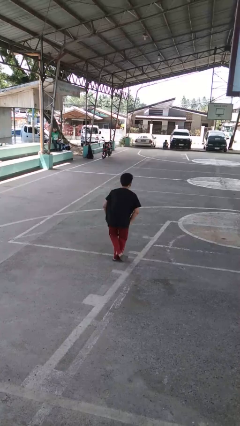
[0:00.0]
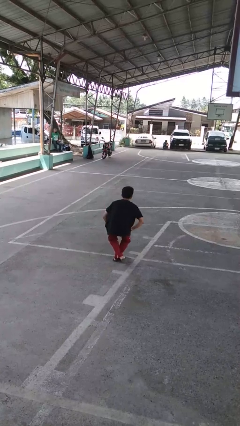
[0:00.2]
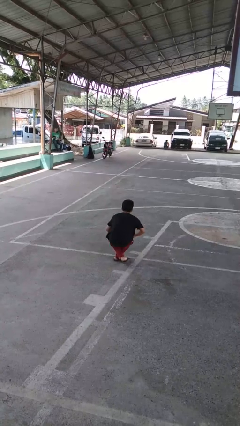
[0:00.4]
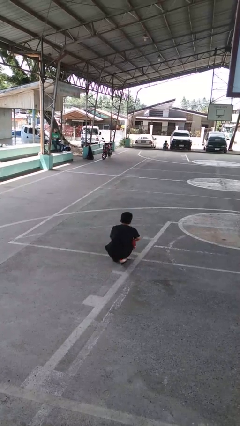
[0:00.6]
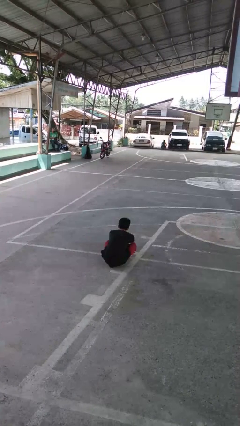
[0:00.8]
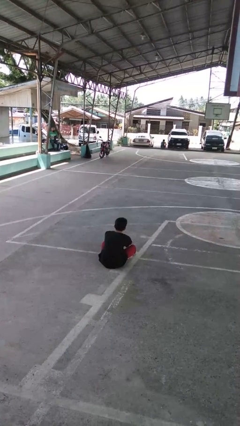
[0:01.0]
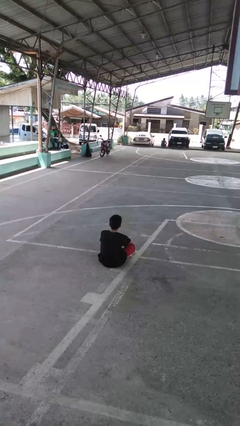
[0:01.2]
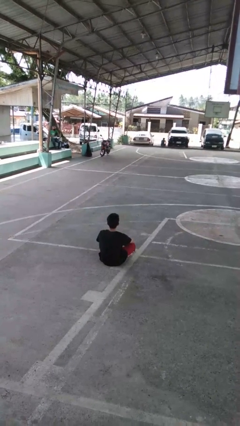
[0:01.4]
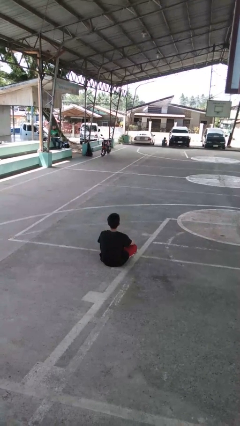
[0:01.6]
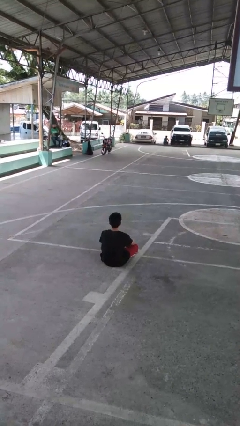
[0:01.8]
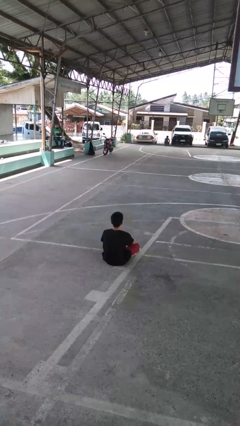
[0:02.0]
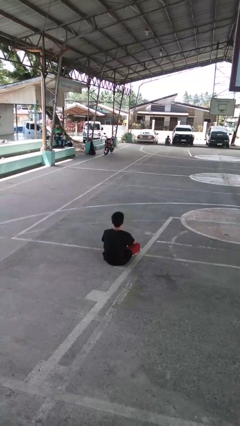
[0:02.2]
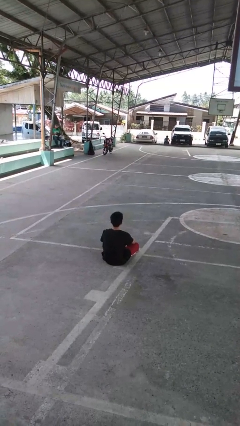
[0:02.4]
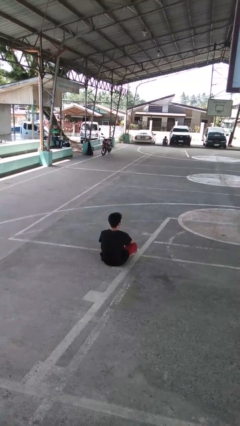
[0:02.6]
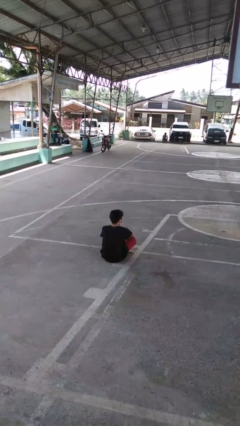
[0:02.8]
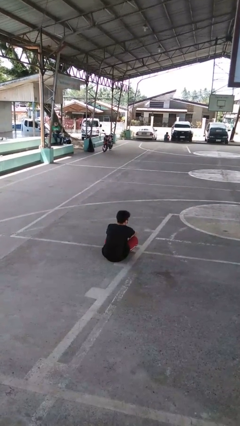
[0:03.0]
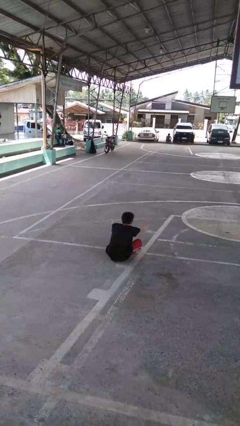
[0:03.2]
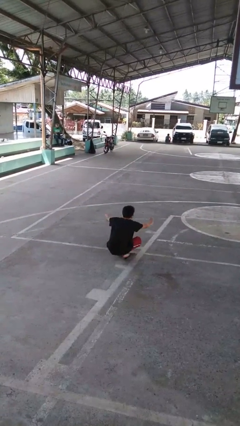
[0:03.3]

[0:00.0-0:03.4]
person sits crisscross

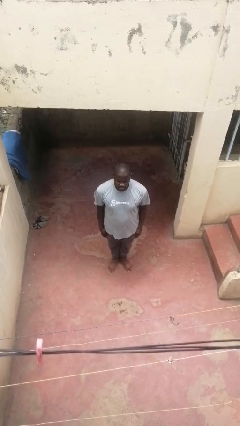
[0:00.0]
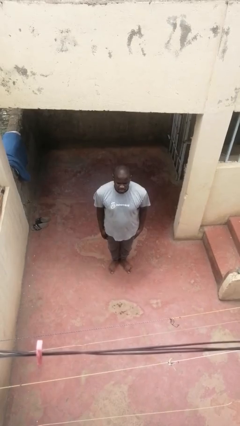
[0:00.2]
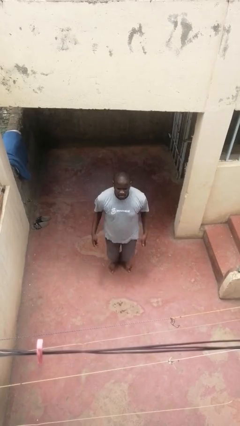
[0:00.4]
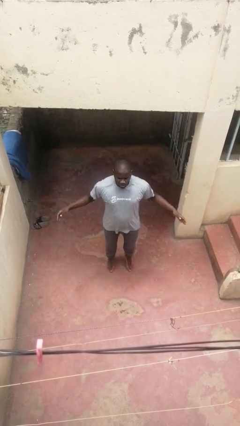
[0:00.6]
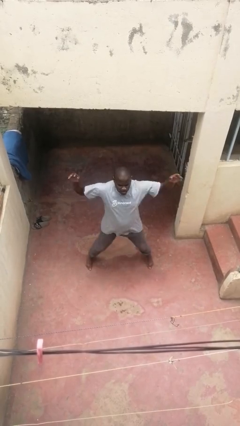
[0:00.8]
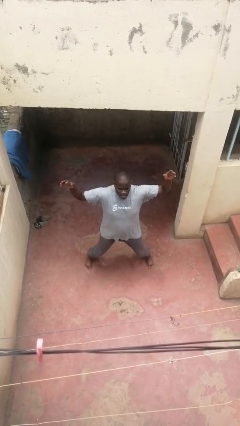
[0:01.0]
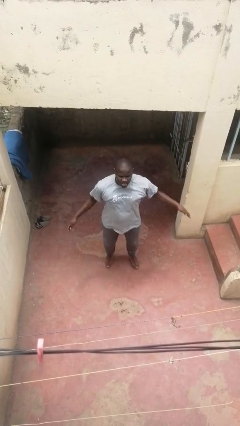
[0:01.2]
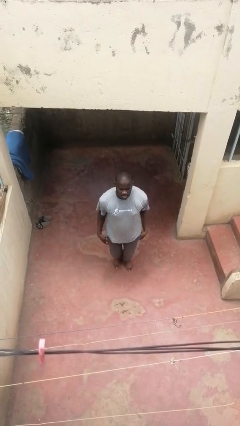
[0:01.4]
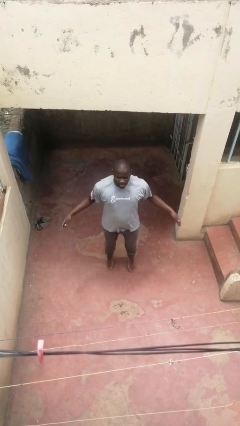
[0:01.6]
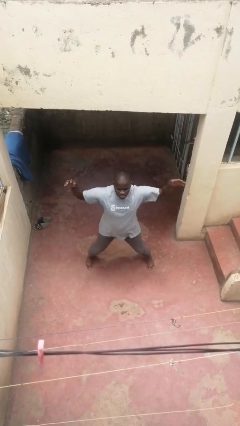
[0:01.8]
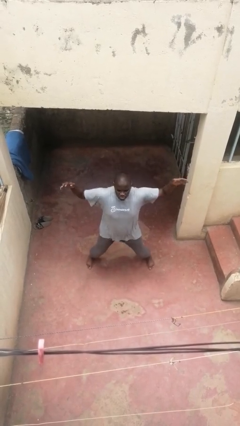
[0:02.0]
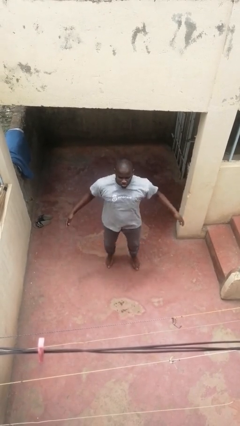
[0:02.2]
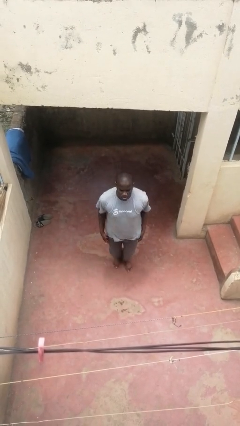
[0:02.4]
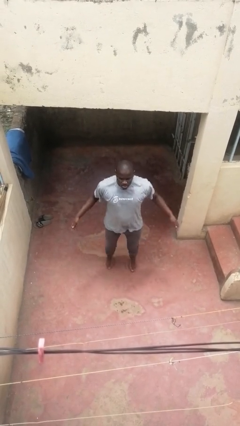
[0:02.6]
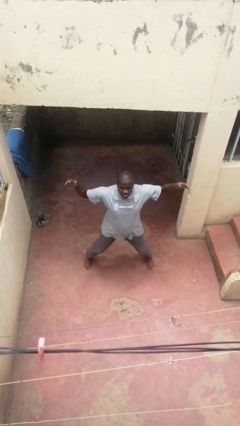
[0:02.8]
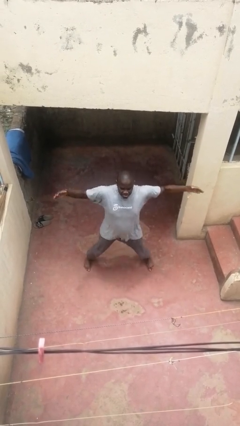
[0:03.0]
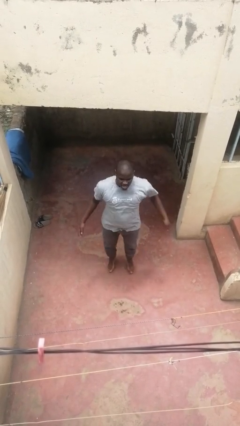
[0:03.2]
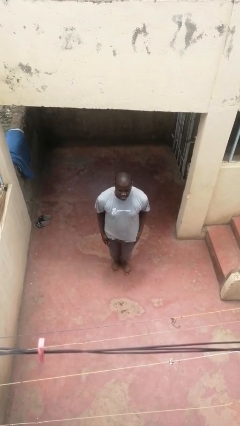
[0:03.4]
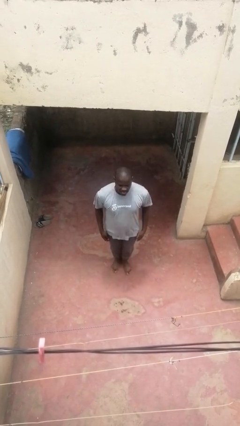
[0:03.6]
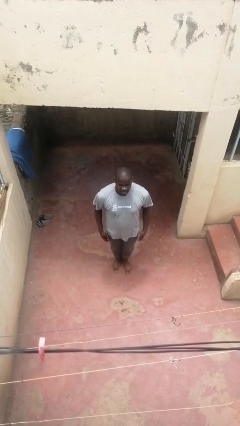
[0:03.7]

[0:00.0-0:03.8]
person exercises with jumping jacks

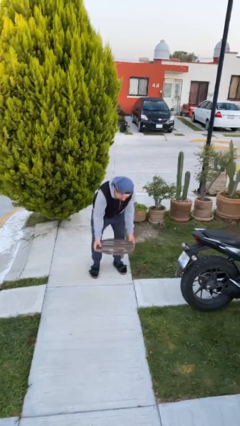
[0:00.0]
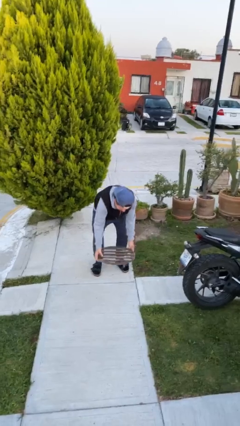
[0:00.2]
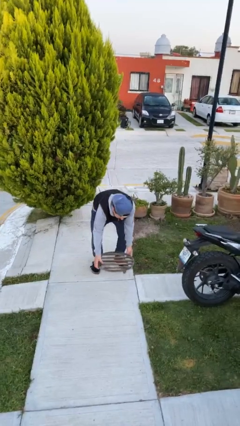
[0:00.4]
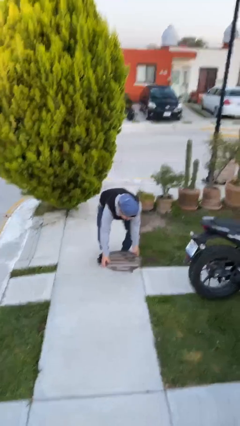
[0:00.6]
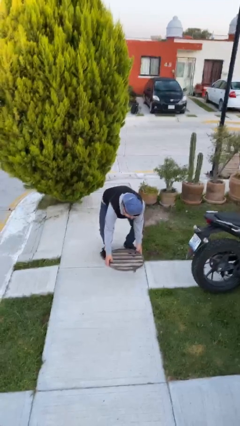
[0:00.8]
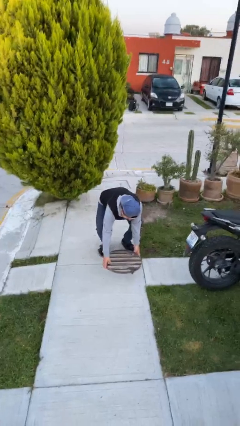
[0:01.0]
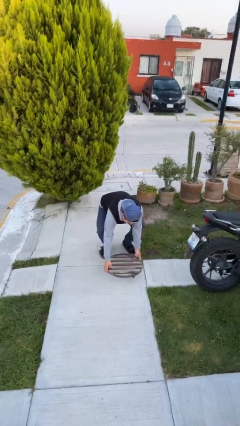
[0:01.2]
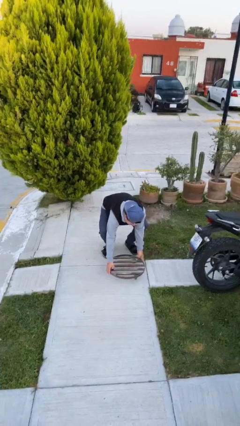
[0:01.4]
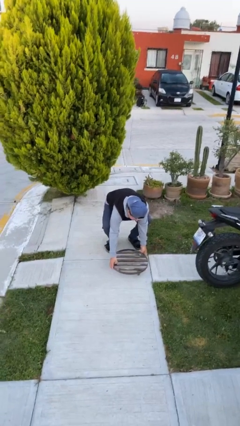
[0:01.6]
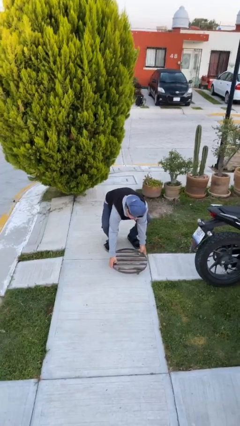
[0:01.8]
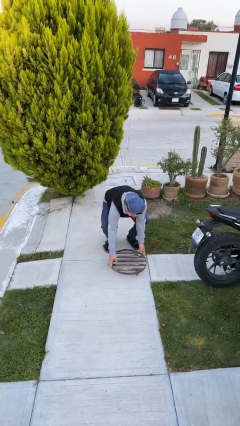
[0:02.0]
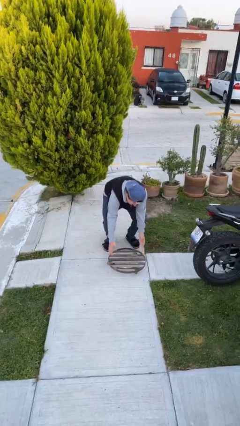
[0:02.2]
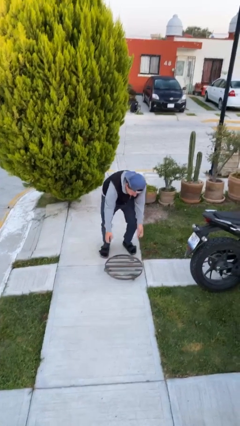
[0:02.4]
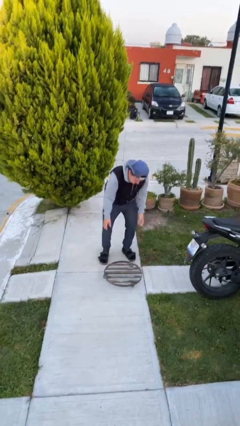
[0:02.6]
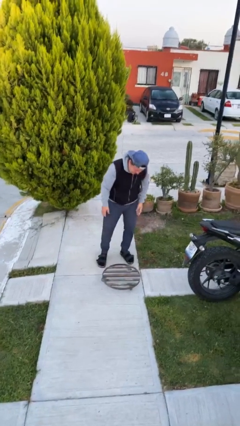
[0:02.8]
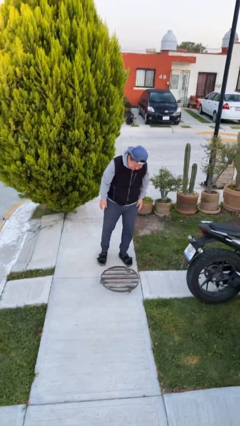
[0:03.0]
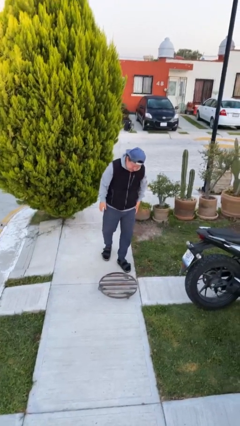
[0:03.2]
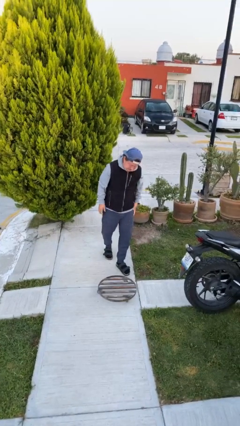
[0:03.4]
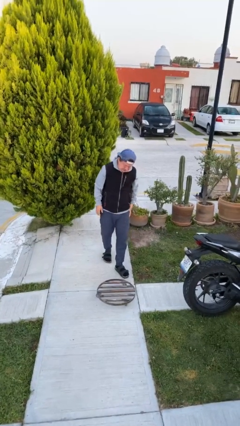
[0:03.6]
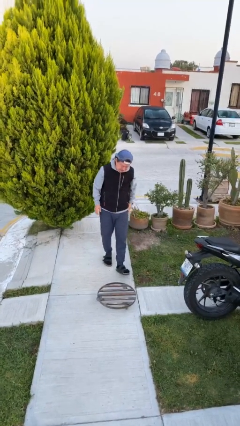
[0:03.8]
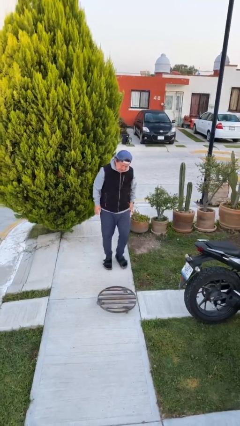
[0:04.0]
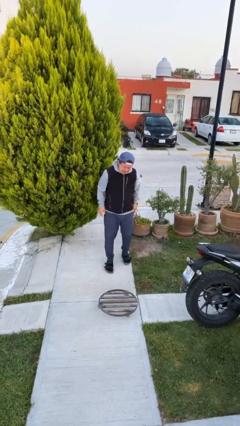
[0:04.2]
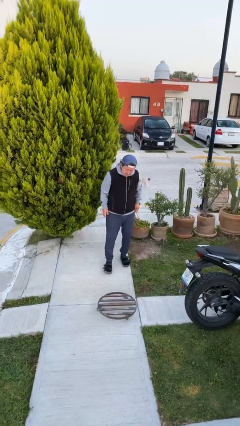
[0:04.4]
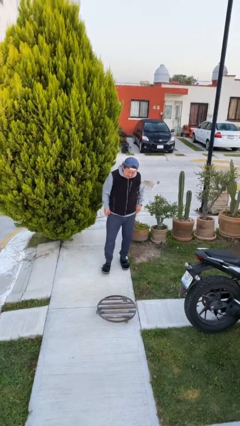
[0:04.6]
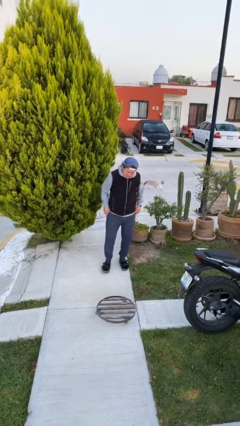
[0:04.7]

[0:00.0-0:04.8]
person puts down object on floor

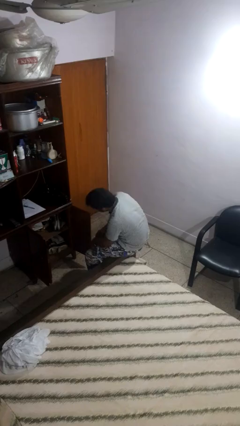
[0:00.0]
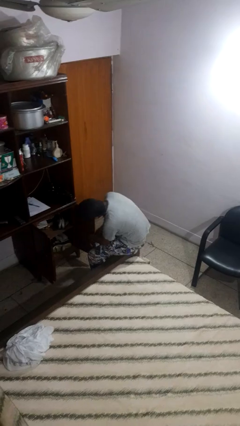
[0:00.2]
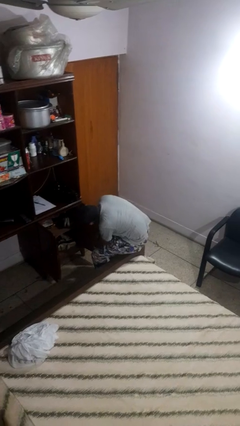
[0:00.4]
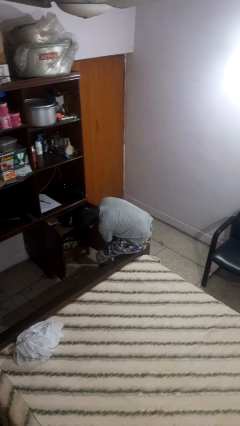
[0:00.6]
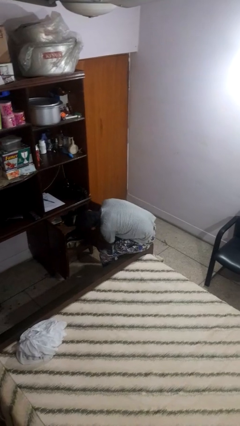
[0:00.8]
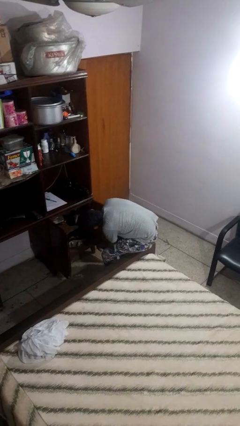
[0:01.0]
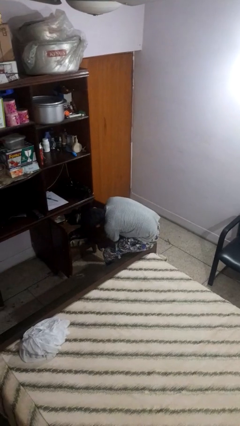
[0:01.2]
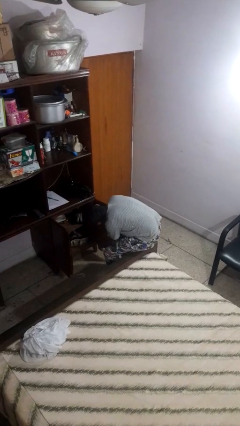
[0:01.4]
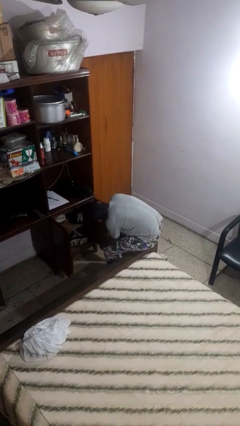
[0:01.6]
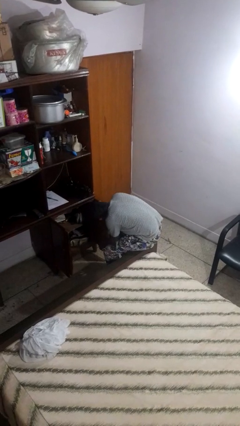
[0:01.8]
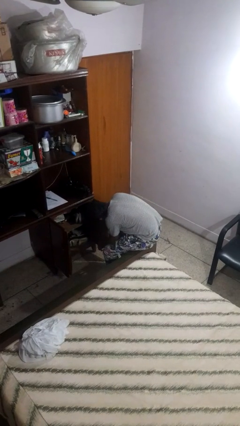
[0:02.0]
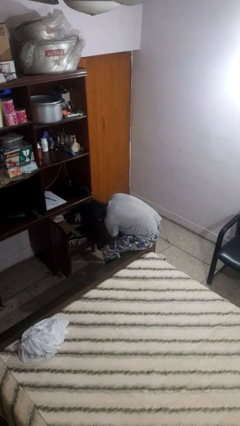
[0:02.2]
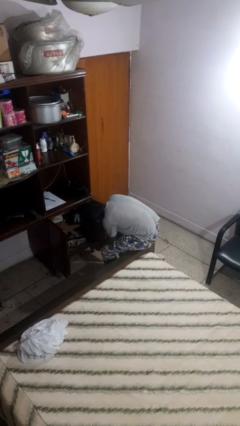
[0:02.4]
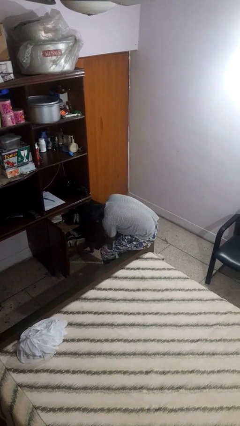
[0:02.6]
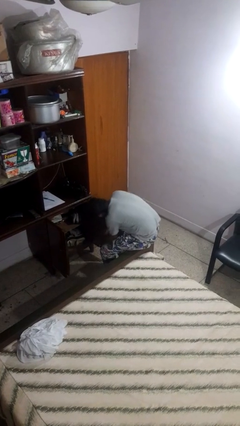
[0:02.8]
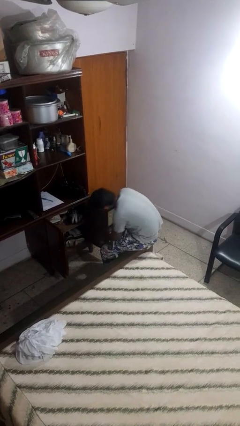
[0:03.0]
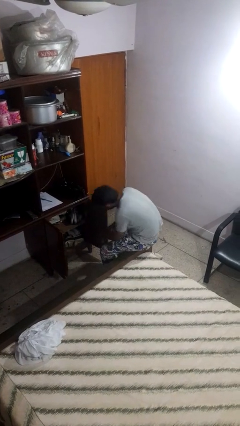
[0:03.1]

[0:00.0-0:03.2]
person searches in cabinet

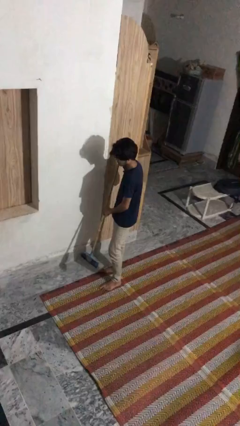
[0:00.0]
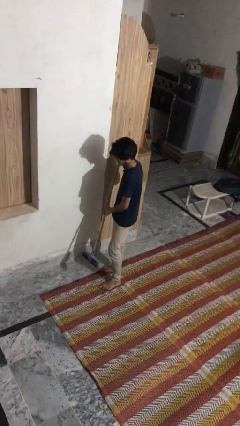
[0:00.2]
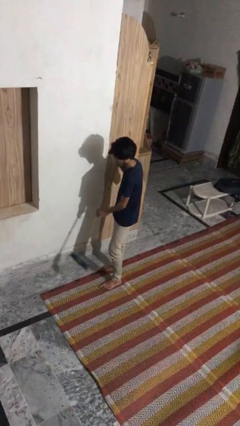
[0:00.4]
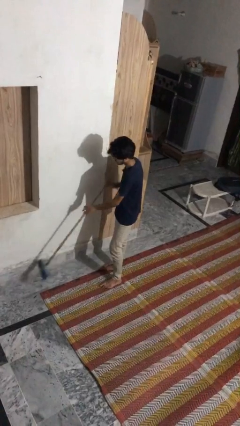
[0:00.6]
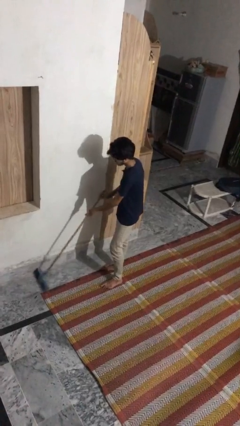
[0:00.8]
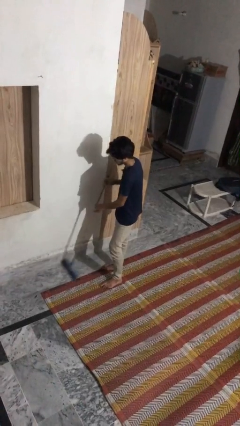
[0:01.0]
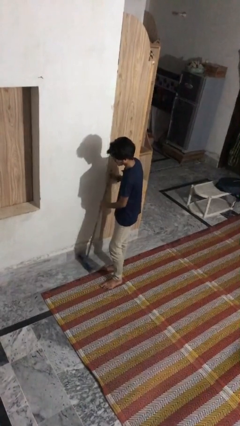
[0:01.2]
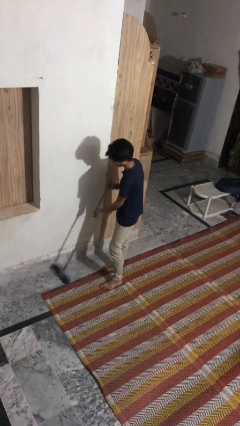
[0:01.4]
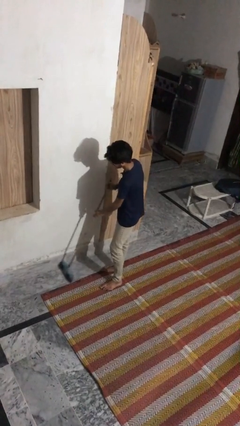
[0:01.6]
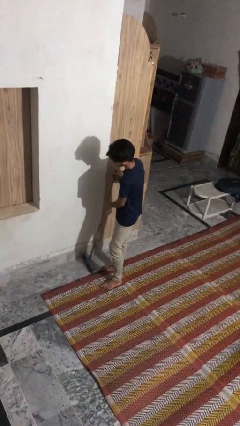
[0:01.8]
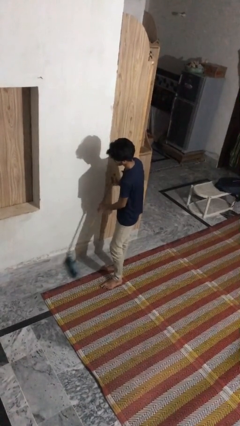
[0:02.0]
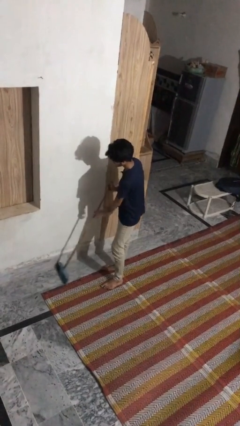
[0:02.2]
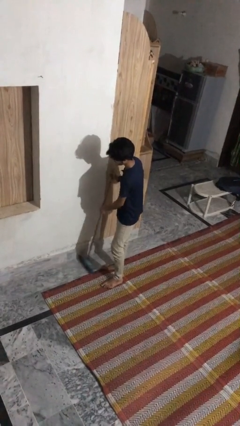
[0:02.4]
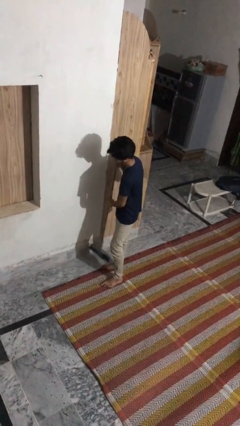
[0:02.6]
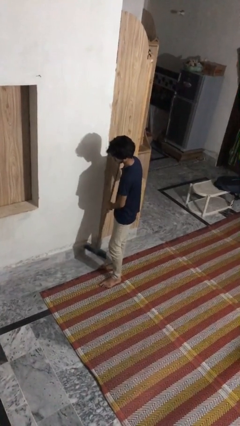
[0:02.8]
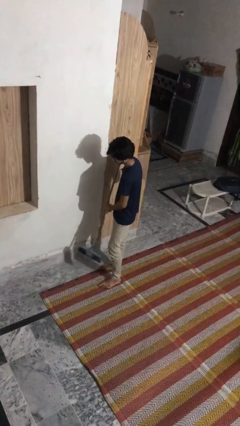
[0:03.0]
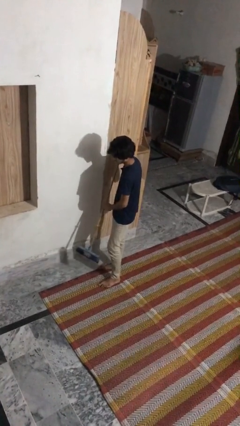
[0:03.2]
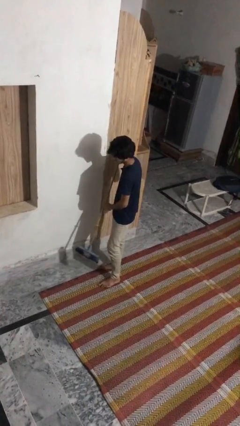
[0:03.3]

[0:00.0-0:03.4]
person sweeps floor
